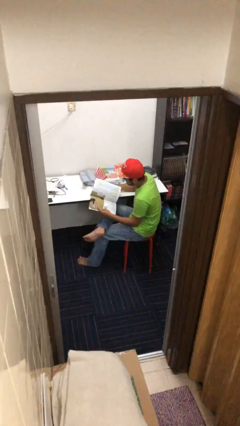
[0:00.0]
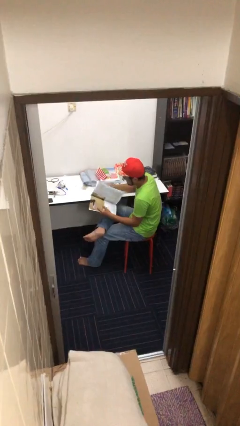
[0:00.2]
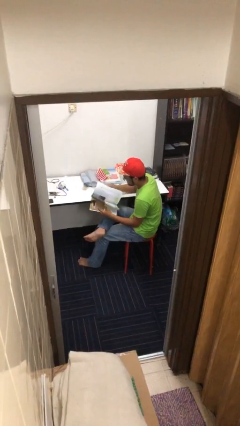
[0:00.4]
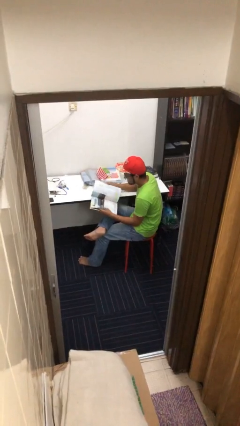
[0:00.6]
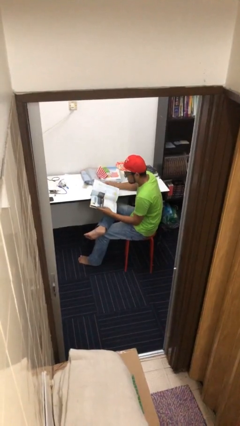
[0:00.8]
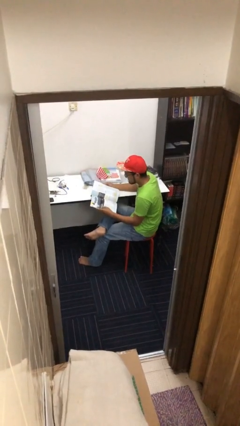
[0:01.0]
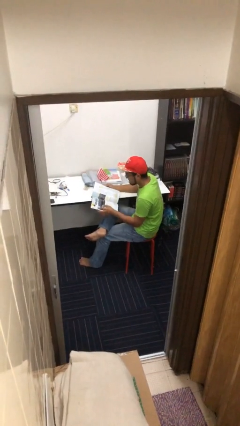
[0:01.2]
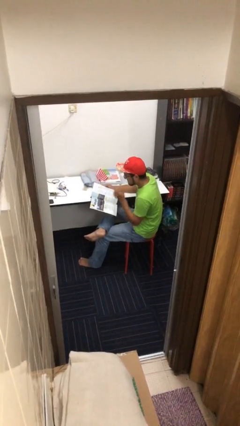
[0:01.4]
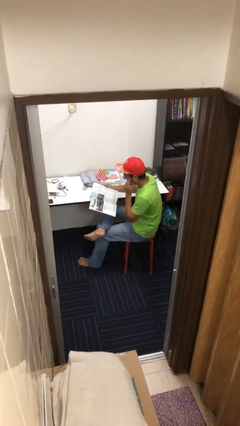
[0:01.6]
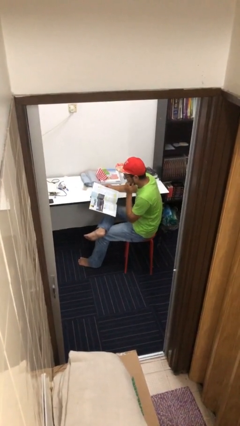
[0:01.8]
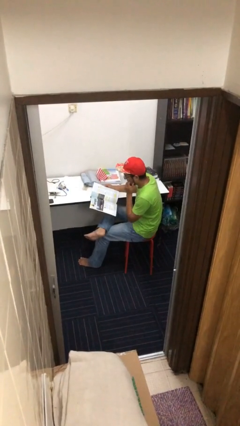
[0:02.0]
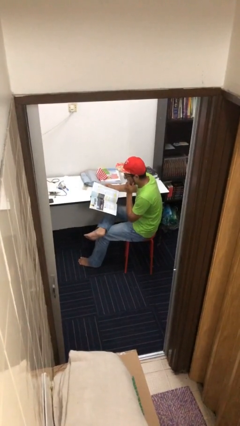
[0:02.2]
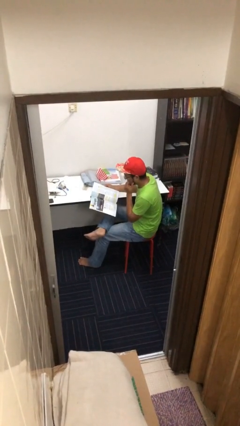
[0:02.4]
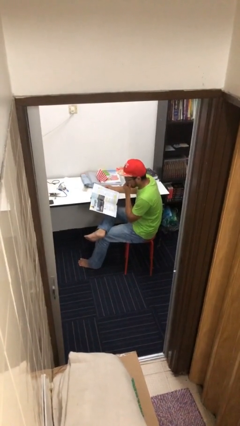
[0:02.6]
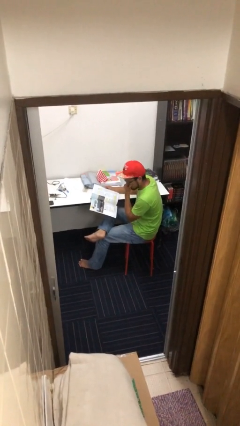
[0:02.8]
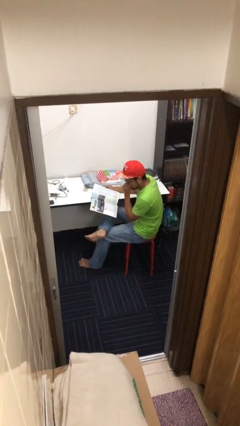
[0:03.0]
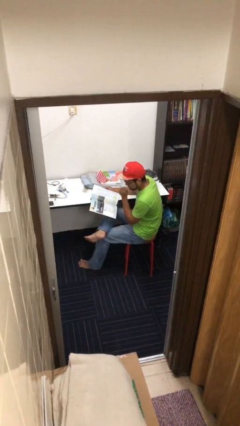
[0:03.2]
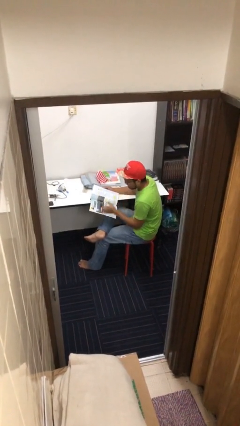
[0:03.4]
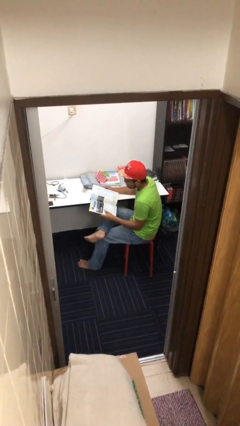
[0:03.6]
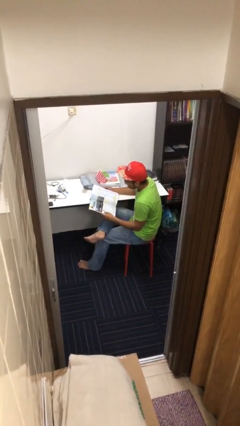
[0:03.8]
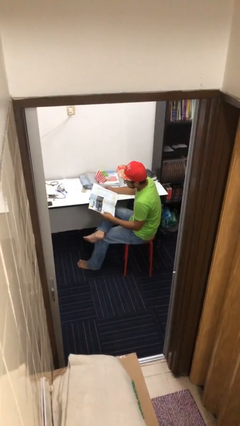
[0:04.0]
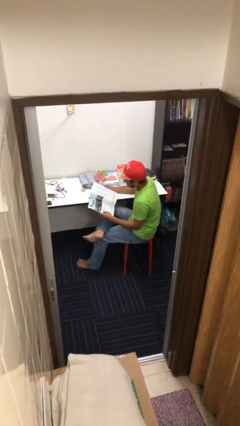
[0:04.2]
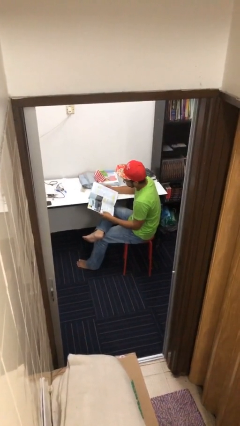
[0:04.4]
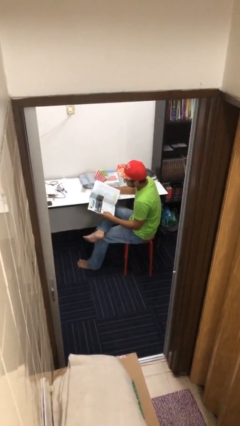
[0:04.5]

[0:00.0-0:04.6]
person reads document

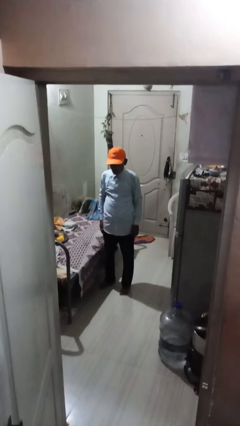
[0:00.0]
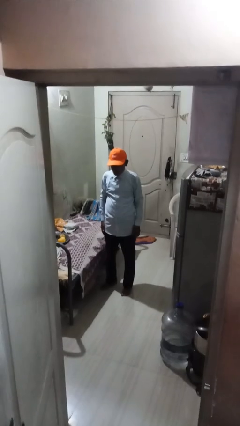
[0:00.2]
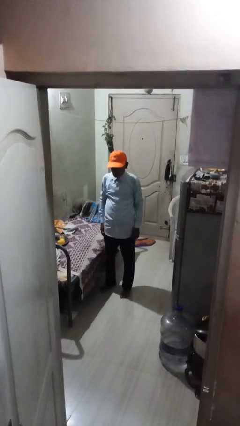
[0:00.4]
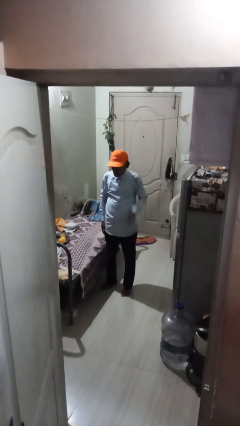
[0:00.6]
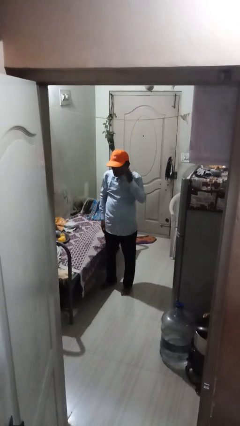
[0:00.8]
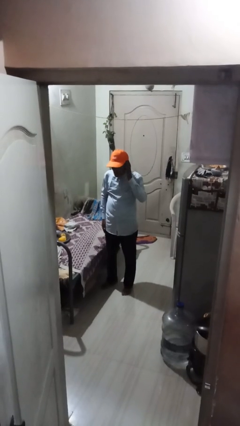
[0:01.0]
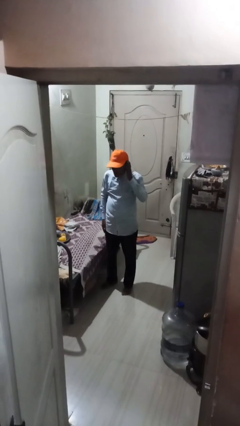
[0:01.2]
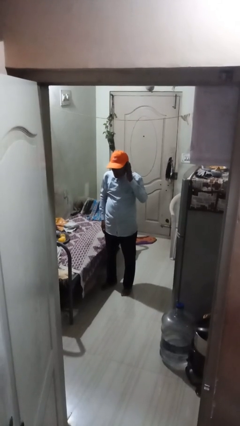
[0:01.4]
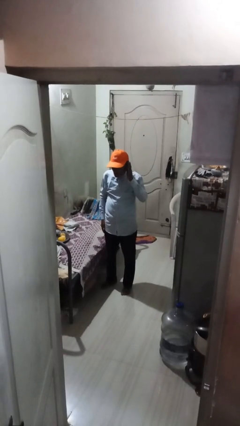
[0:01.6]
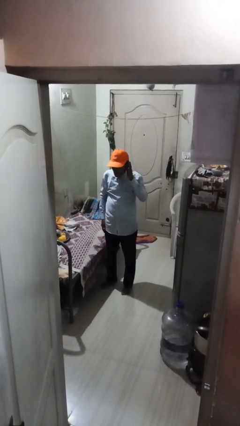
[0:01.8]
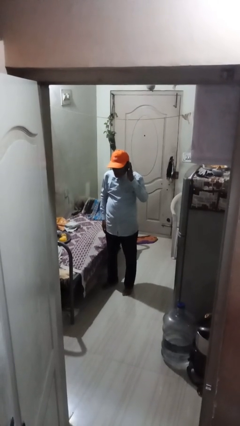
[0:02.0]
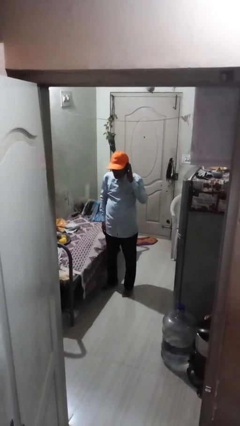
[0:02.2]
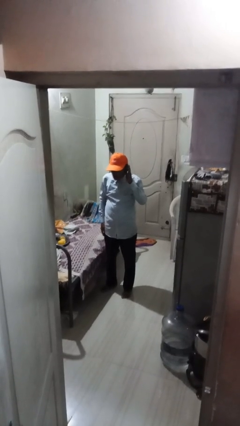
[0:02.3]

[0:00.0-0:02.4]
person gestures listen closely

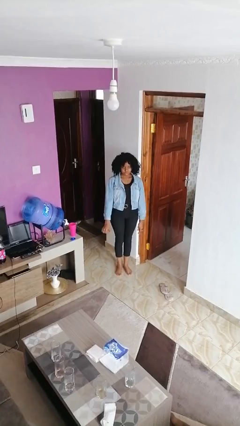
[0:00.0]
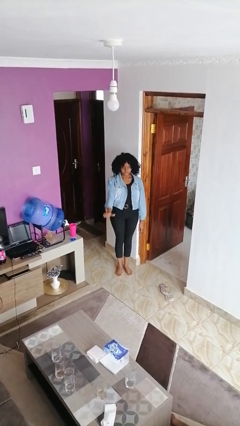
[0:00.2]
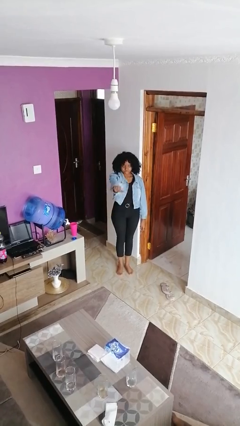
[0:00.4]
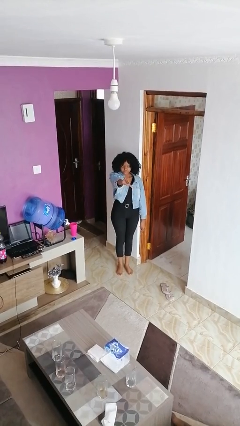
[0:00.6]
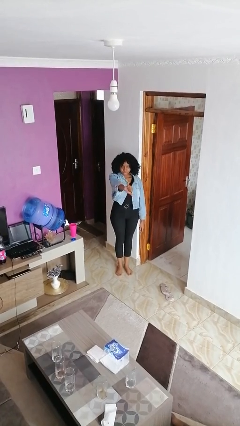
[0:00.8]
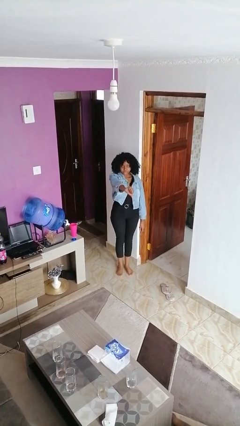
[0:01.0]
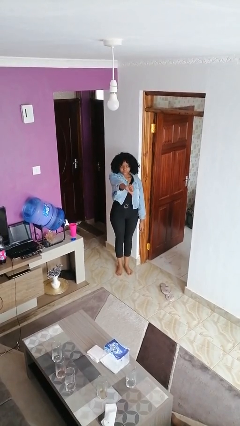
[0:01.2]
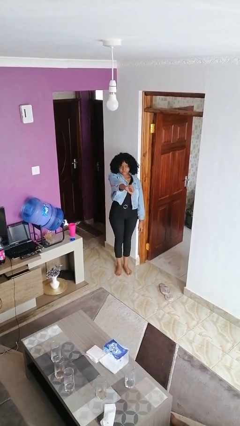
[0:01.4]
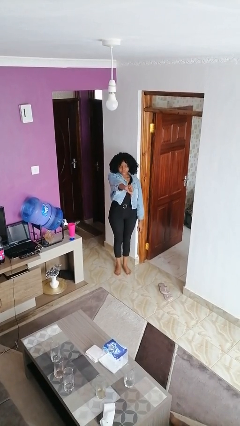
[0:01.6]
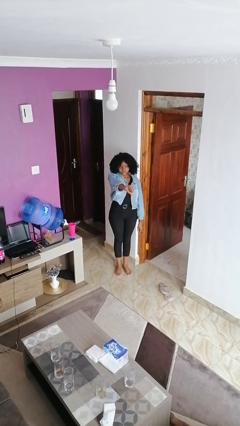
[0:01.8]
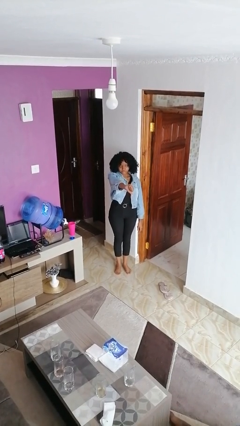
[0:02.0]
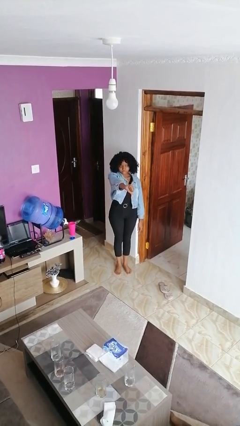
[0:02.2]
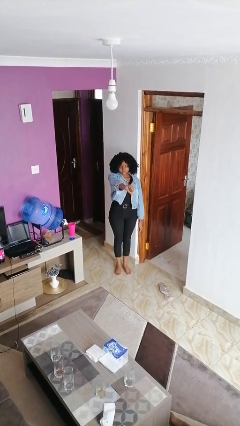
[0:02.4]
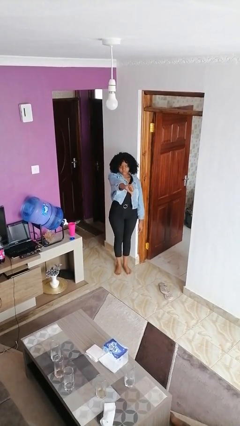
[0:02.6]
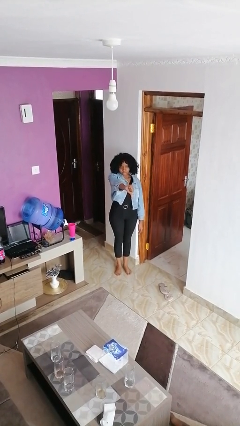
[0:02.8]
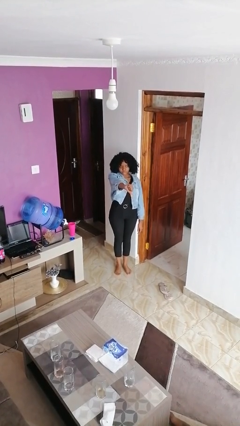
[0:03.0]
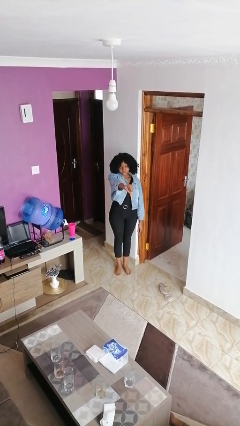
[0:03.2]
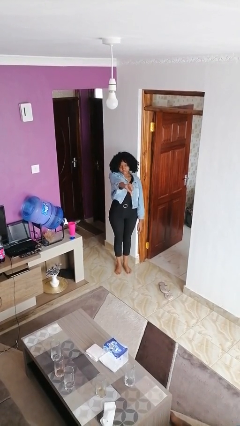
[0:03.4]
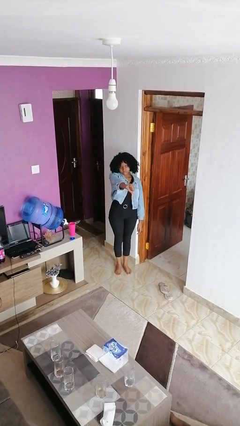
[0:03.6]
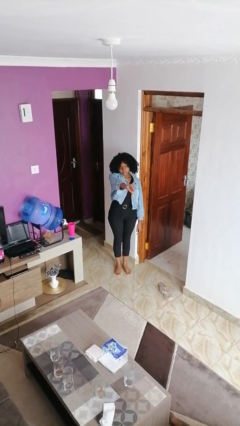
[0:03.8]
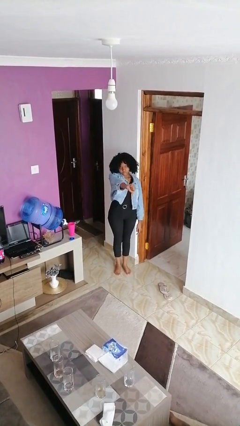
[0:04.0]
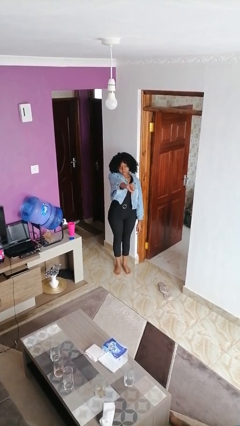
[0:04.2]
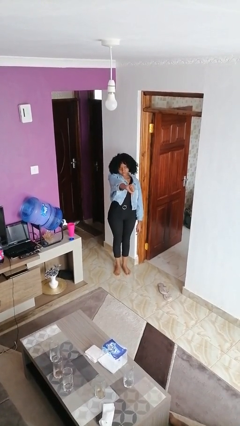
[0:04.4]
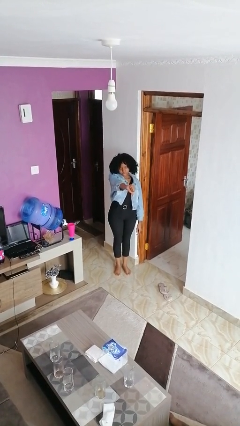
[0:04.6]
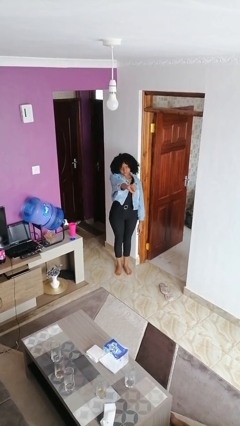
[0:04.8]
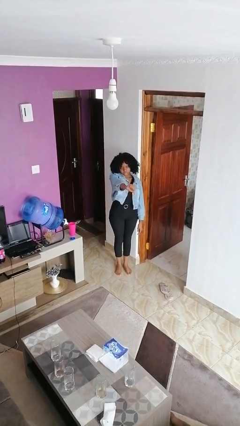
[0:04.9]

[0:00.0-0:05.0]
person gestures thumbs down

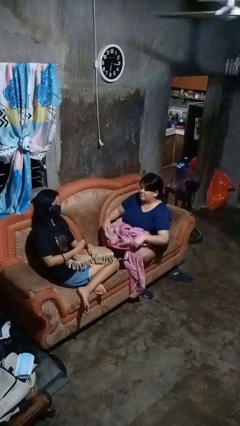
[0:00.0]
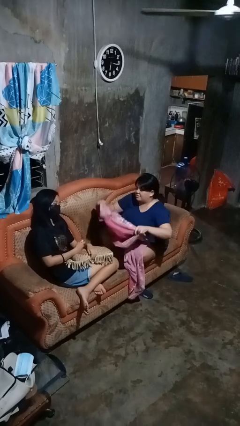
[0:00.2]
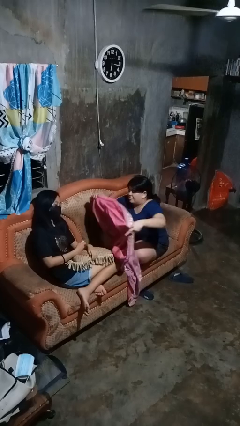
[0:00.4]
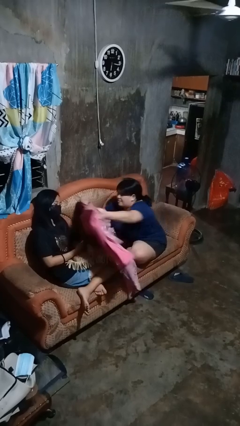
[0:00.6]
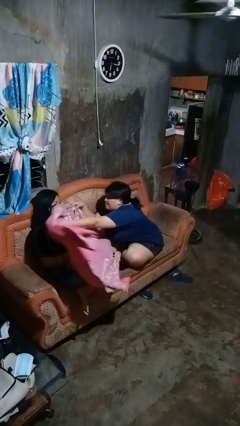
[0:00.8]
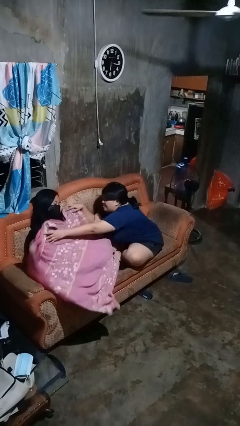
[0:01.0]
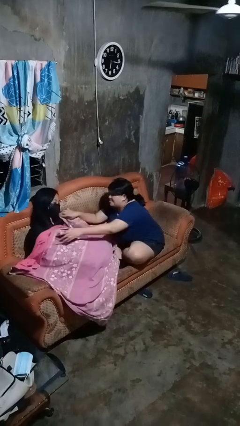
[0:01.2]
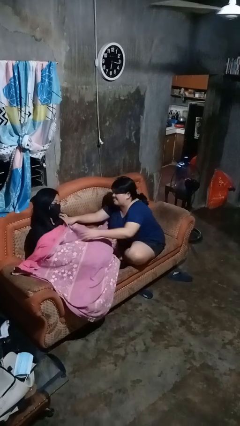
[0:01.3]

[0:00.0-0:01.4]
person covers friend with blanket

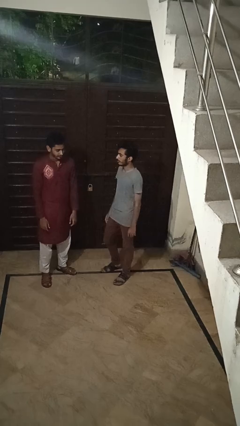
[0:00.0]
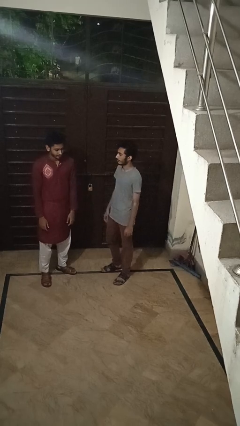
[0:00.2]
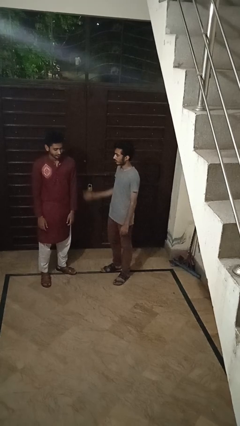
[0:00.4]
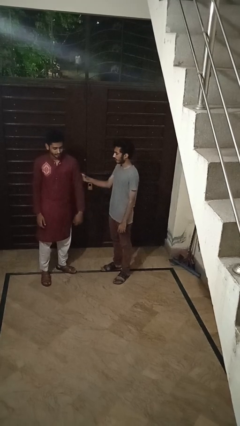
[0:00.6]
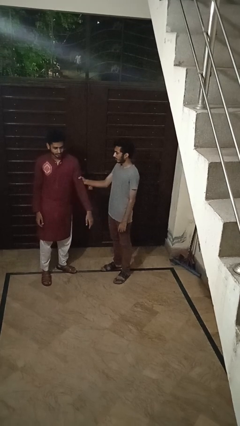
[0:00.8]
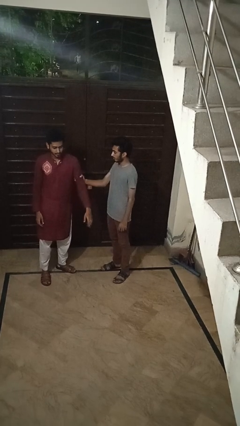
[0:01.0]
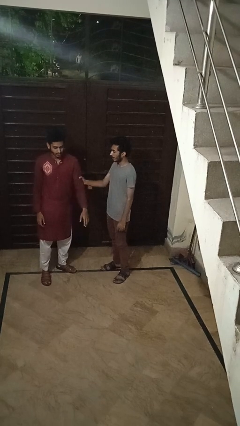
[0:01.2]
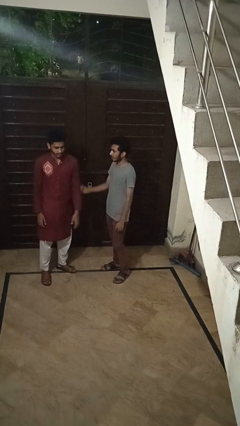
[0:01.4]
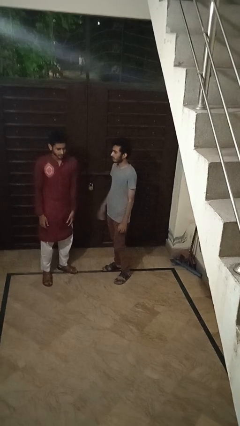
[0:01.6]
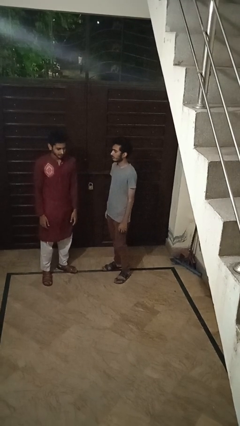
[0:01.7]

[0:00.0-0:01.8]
person grabs person by bicep

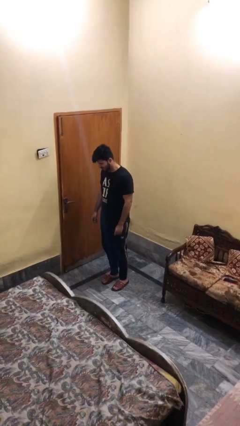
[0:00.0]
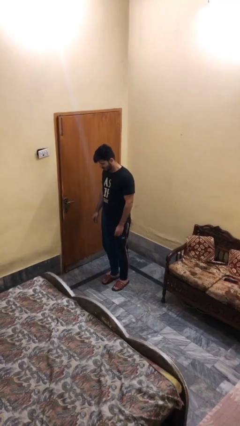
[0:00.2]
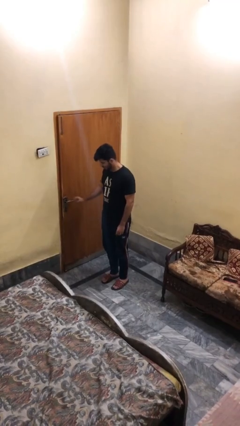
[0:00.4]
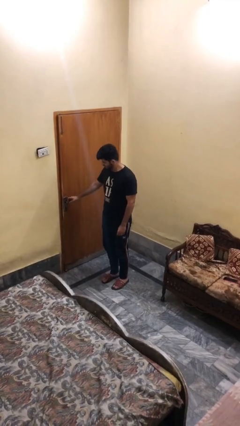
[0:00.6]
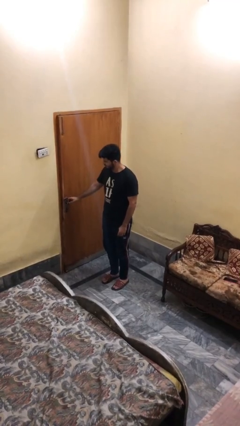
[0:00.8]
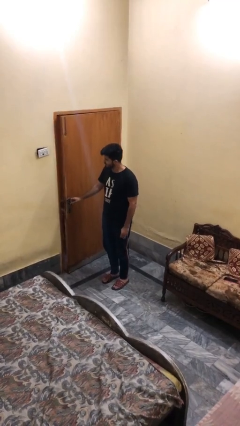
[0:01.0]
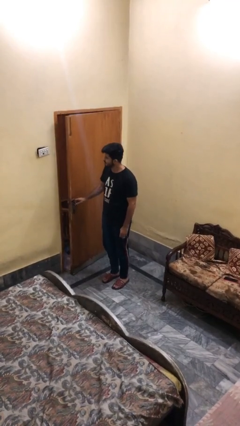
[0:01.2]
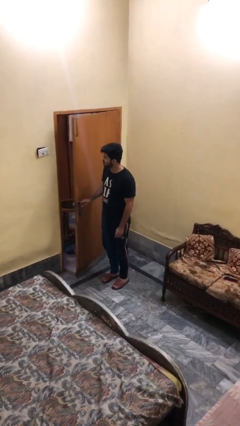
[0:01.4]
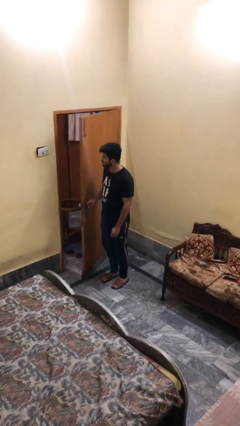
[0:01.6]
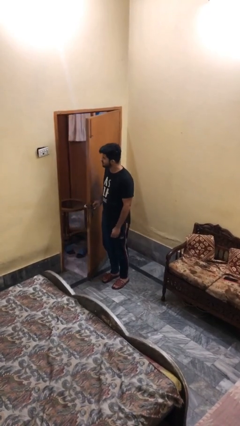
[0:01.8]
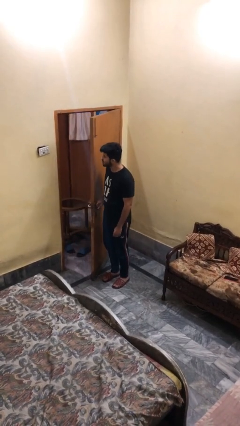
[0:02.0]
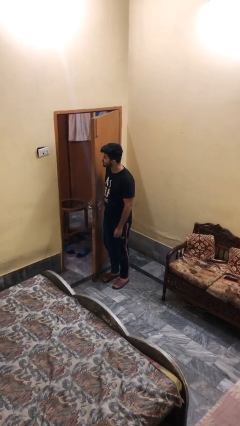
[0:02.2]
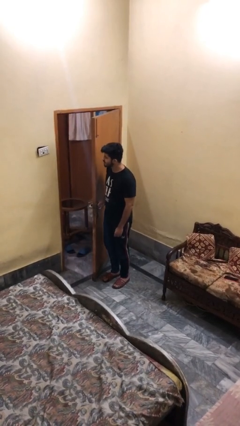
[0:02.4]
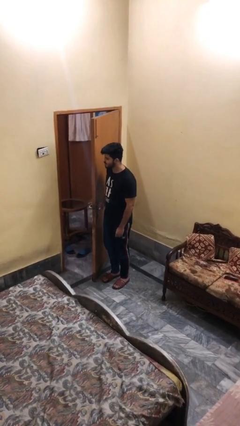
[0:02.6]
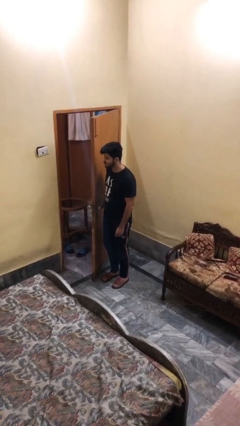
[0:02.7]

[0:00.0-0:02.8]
person opens facility door
